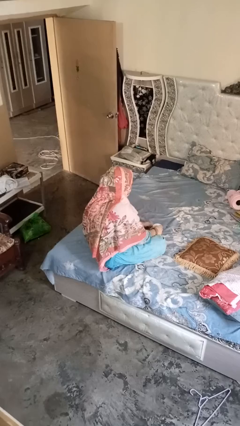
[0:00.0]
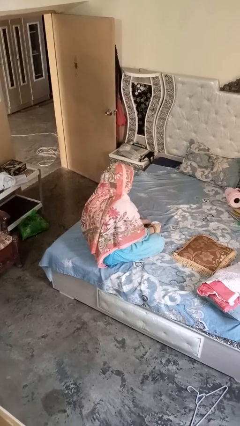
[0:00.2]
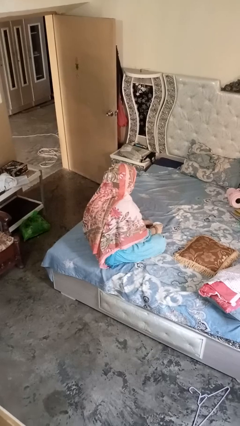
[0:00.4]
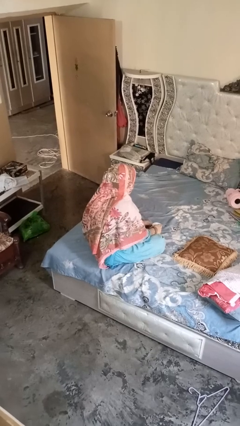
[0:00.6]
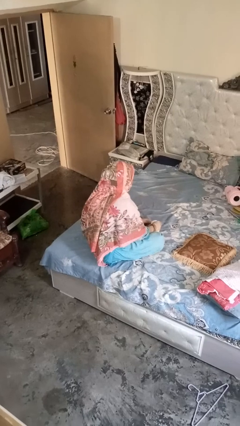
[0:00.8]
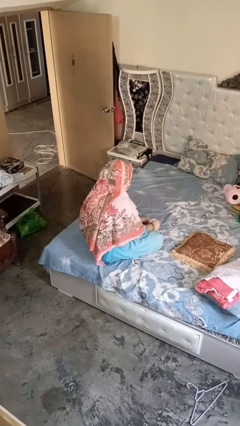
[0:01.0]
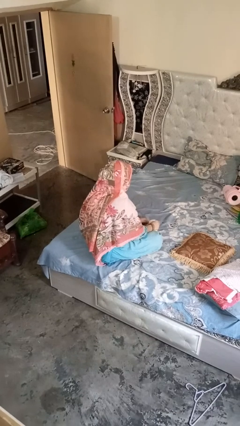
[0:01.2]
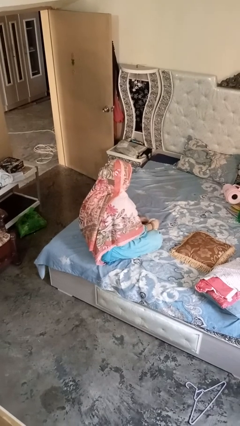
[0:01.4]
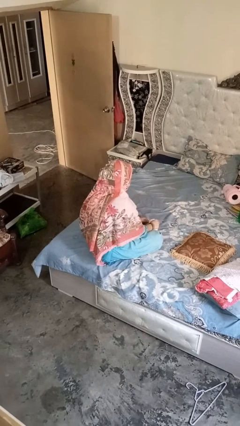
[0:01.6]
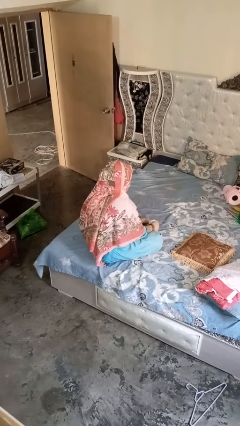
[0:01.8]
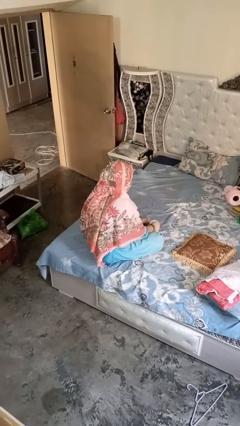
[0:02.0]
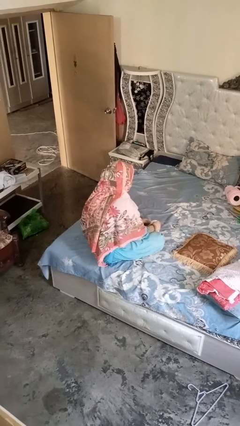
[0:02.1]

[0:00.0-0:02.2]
person stirs mug

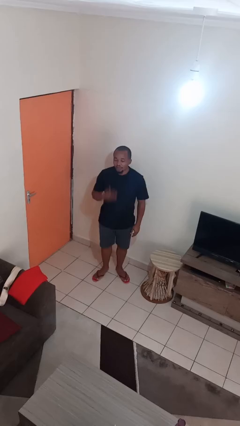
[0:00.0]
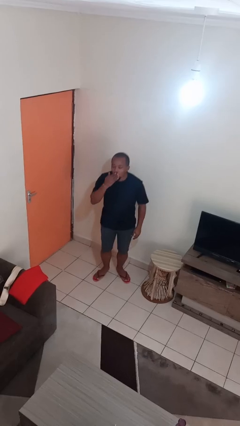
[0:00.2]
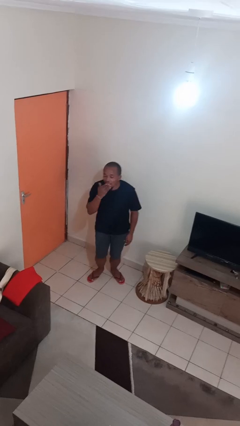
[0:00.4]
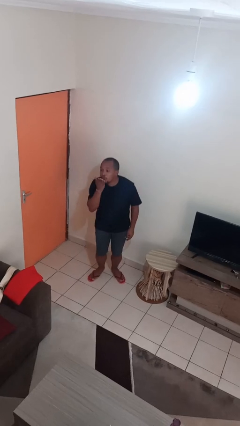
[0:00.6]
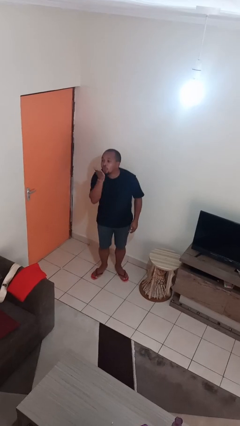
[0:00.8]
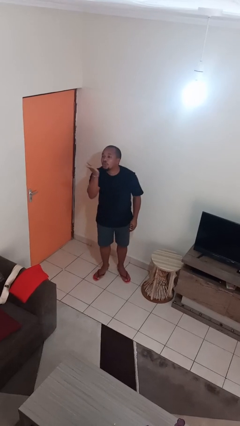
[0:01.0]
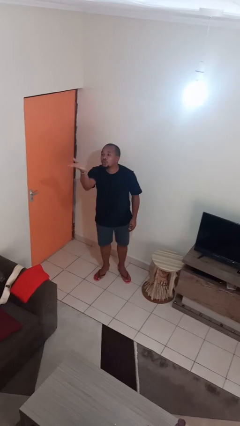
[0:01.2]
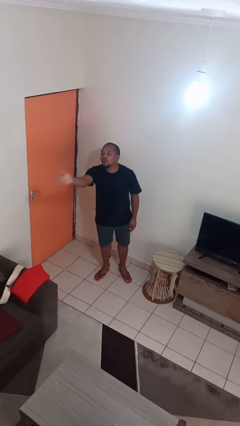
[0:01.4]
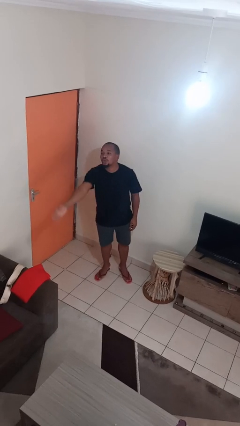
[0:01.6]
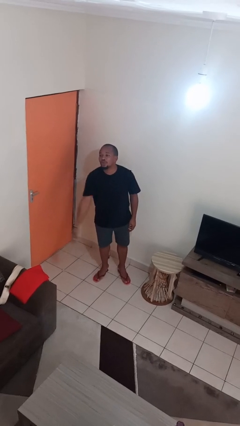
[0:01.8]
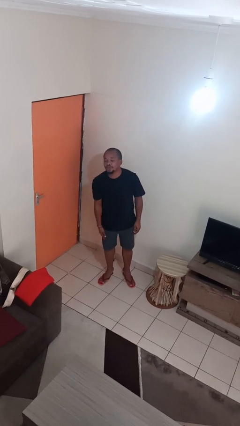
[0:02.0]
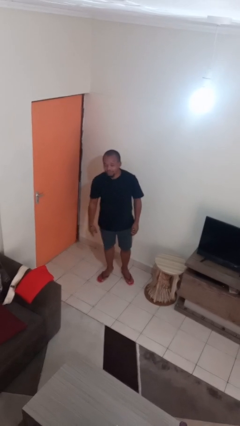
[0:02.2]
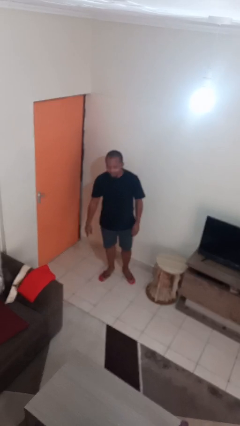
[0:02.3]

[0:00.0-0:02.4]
person gestures blow kiss

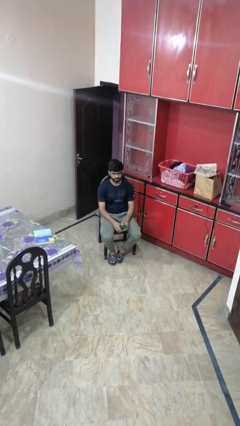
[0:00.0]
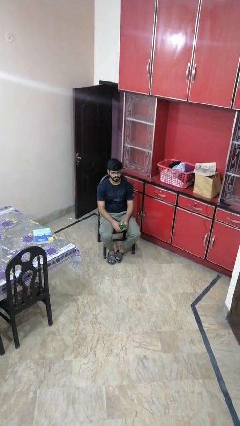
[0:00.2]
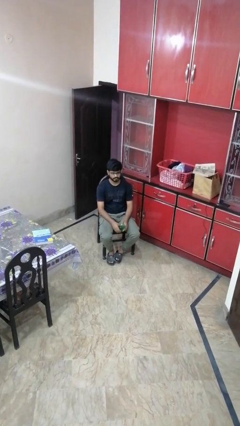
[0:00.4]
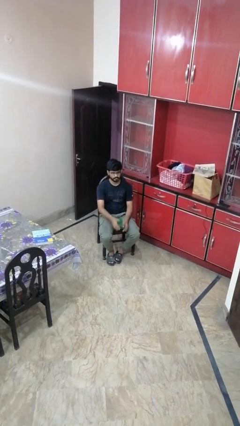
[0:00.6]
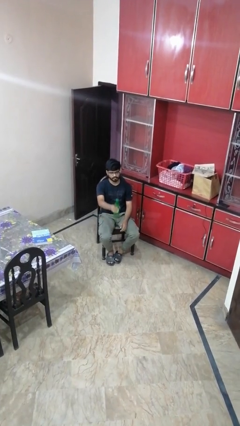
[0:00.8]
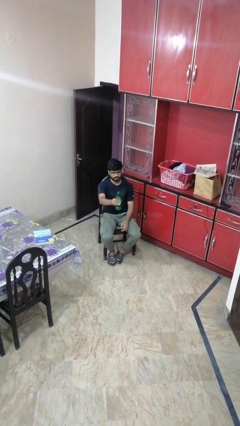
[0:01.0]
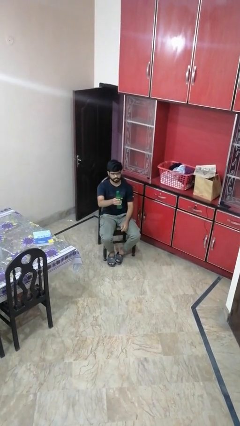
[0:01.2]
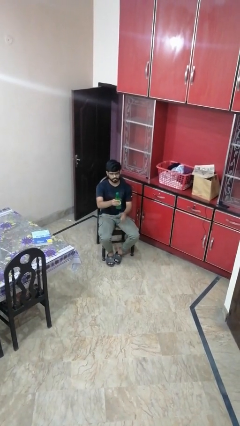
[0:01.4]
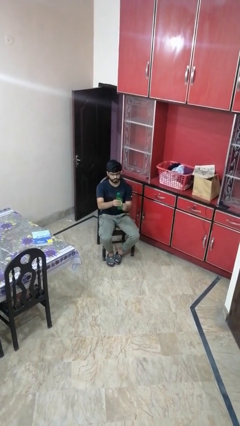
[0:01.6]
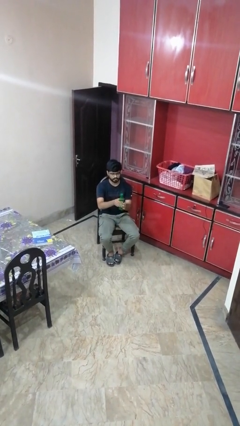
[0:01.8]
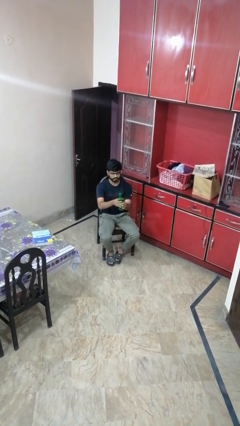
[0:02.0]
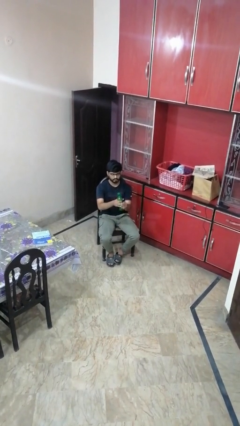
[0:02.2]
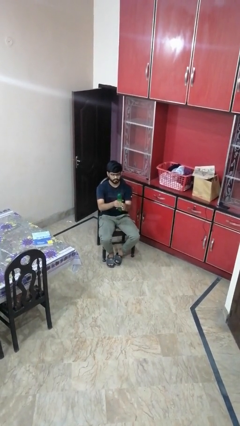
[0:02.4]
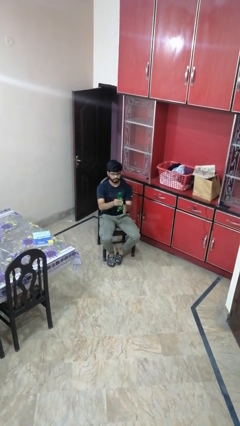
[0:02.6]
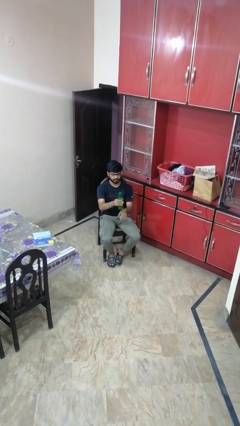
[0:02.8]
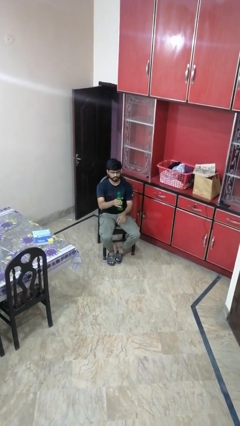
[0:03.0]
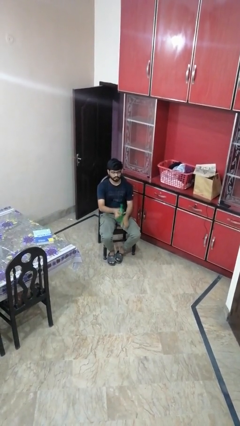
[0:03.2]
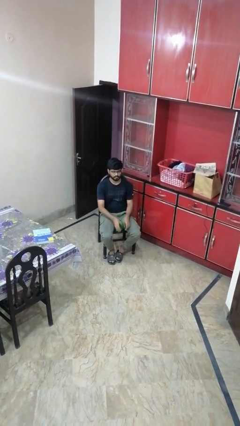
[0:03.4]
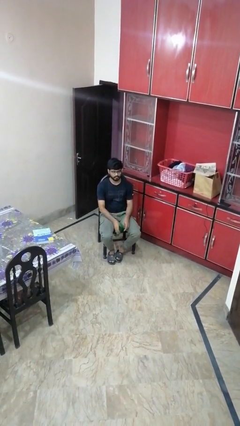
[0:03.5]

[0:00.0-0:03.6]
person squeezes object

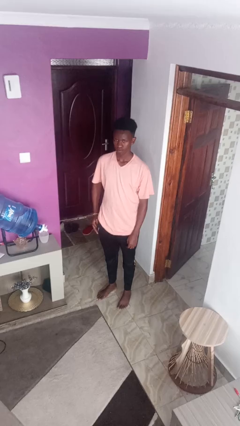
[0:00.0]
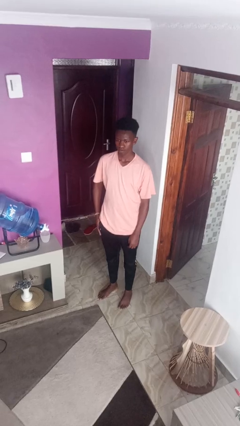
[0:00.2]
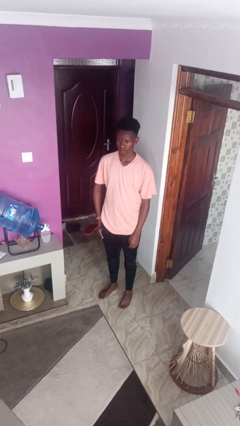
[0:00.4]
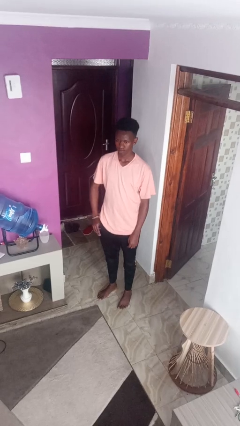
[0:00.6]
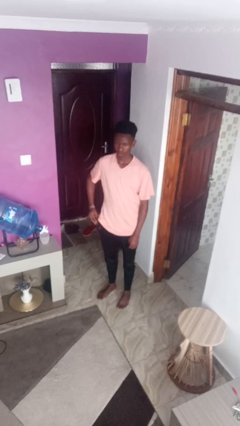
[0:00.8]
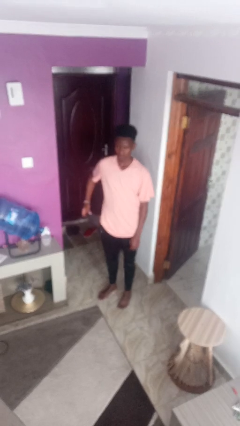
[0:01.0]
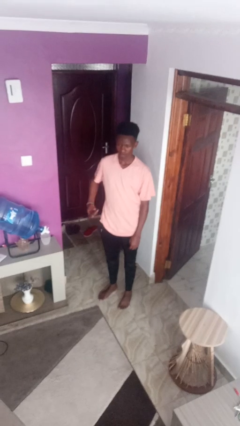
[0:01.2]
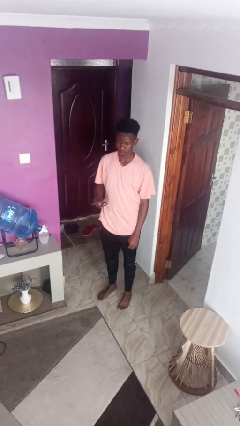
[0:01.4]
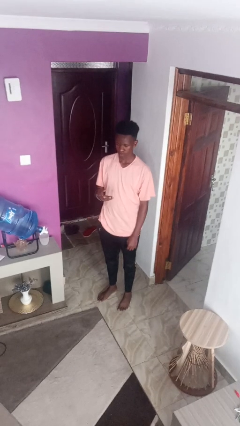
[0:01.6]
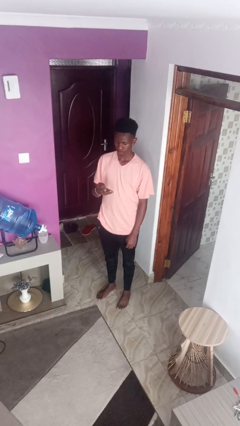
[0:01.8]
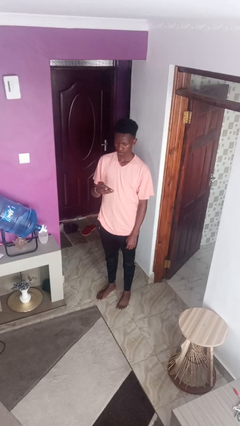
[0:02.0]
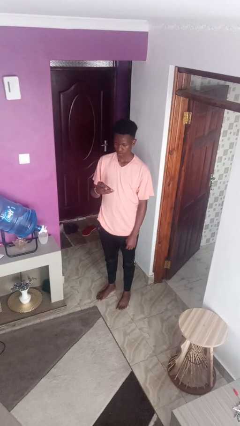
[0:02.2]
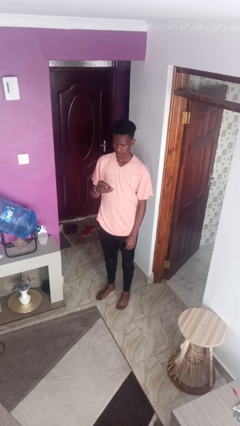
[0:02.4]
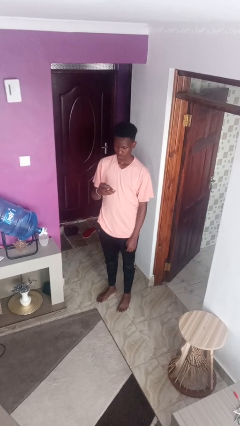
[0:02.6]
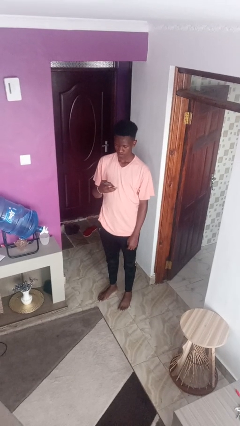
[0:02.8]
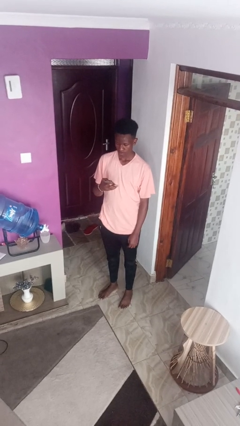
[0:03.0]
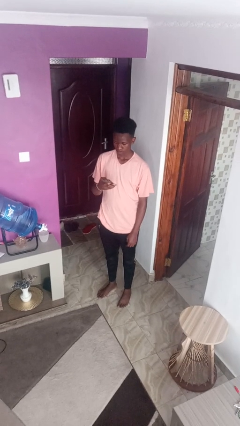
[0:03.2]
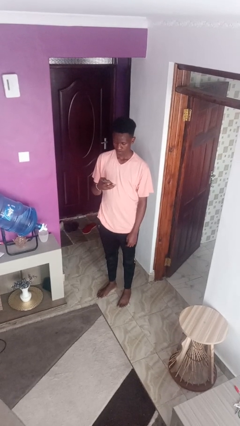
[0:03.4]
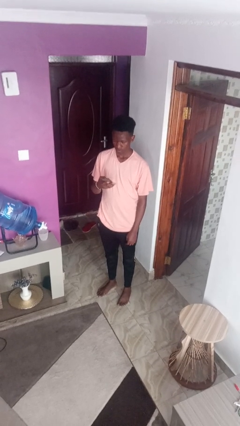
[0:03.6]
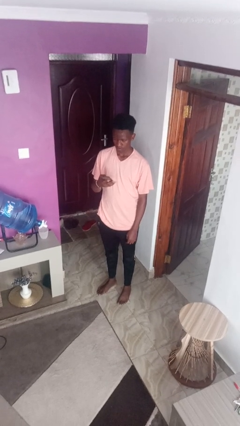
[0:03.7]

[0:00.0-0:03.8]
person takes phone from pocket

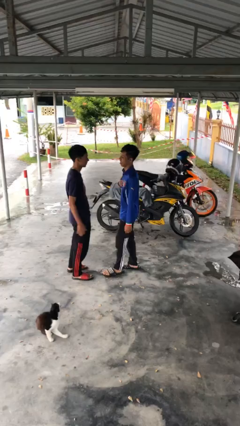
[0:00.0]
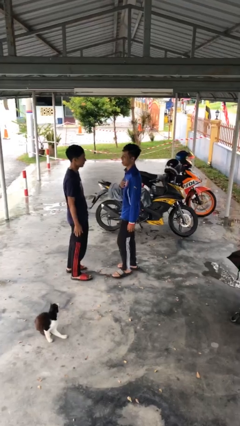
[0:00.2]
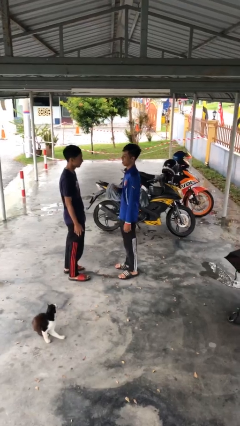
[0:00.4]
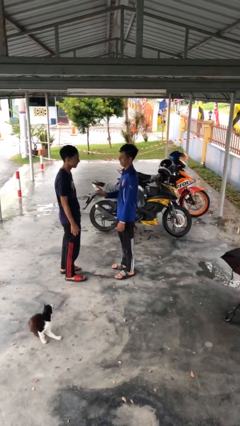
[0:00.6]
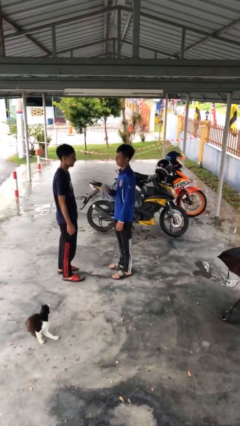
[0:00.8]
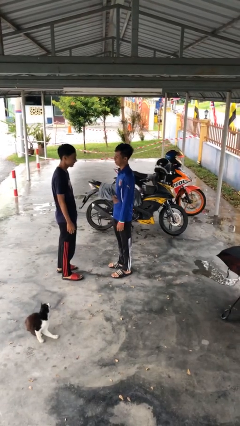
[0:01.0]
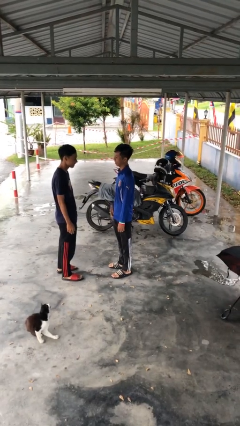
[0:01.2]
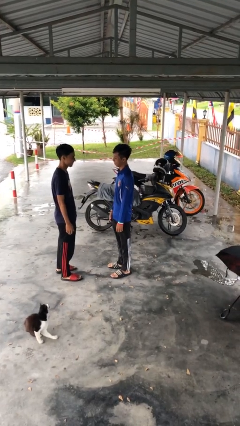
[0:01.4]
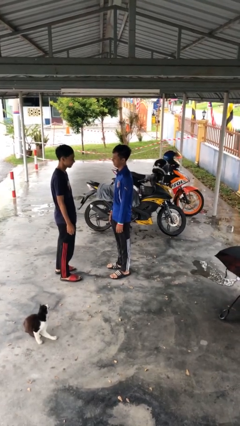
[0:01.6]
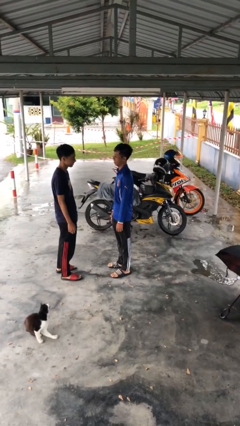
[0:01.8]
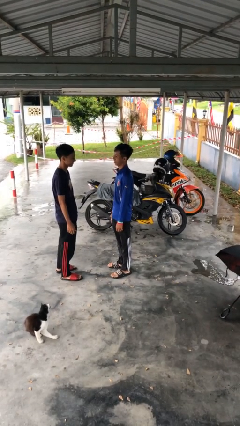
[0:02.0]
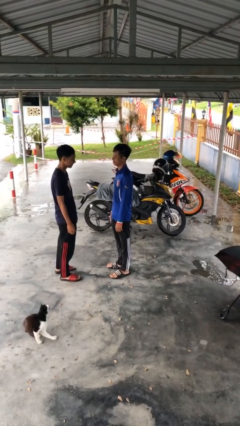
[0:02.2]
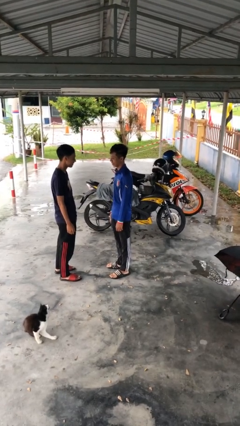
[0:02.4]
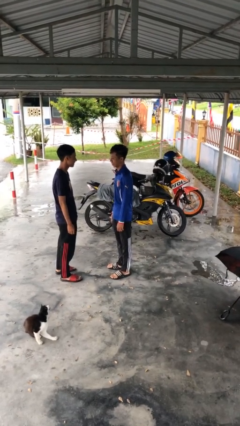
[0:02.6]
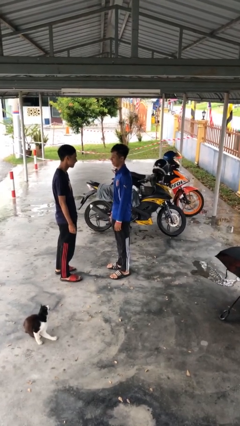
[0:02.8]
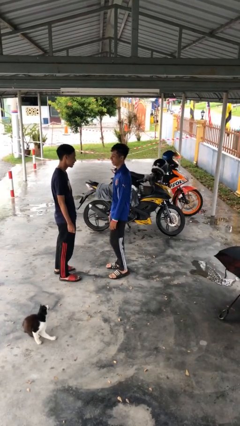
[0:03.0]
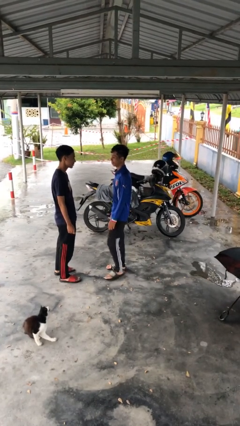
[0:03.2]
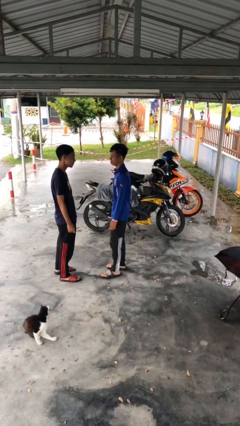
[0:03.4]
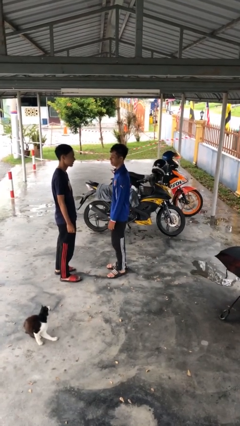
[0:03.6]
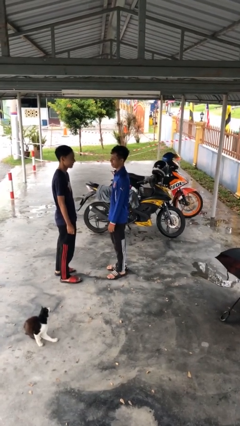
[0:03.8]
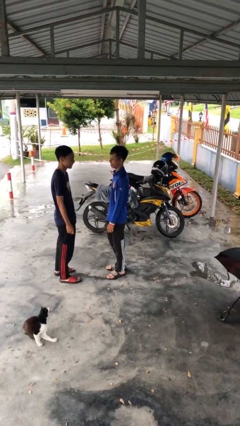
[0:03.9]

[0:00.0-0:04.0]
person talks to person

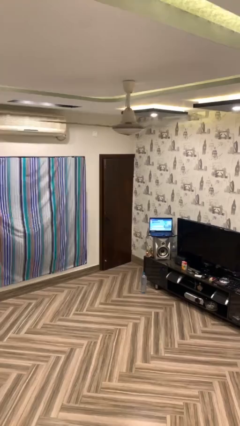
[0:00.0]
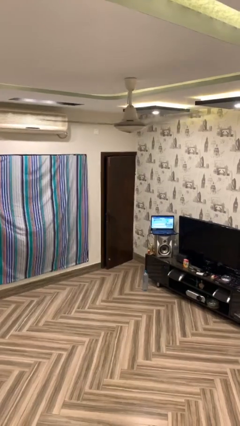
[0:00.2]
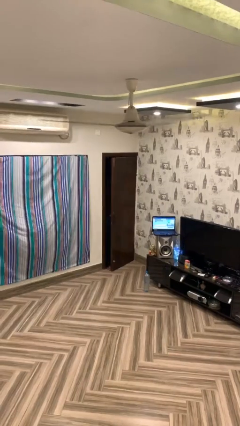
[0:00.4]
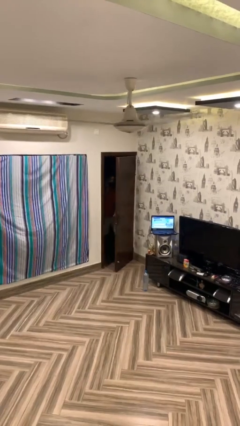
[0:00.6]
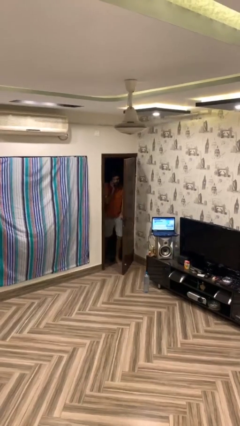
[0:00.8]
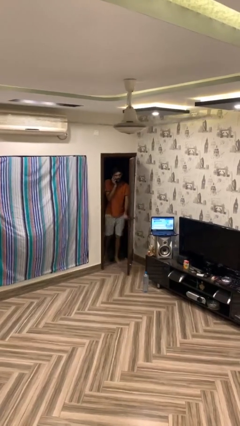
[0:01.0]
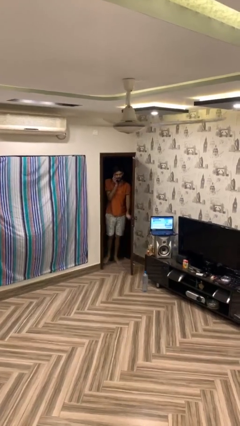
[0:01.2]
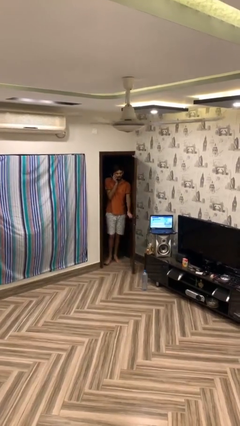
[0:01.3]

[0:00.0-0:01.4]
person opens facility door
